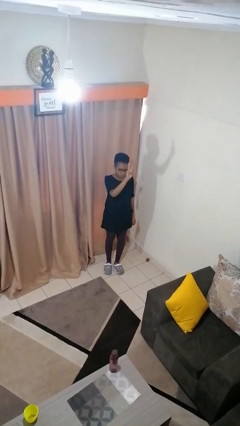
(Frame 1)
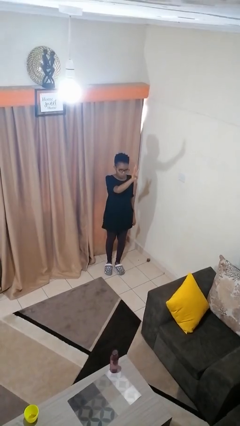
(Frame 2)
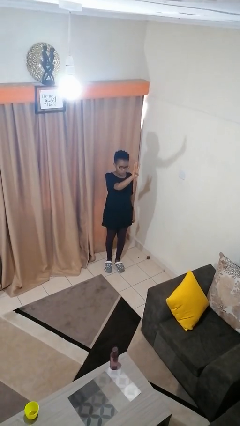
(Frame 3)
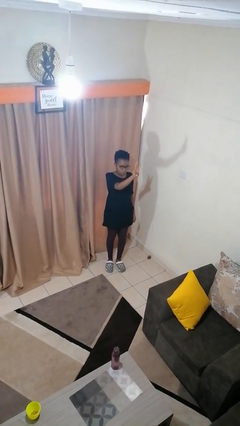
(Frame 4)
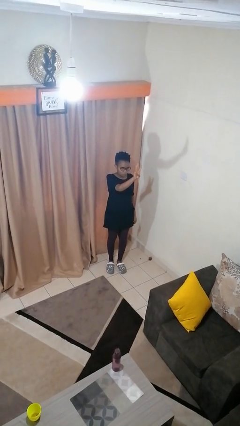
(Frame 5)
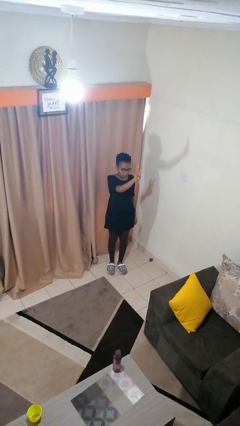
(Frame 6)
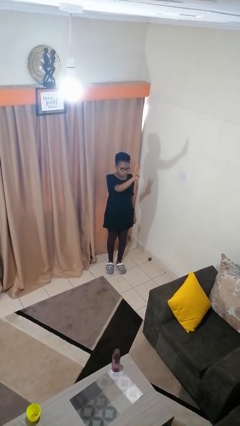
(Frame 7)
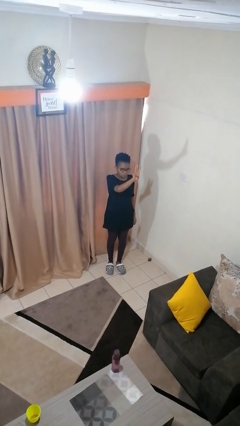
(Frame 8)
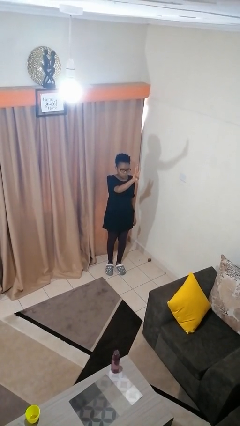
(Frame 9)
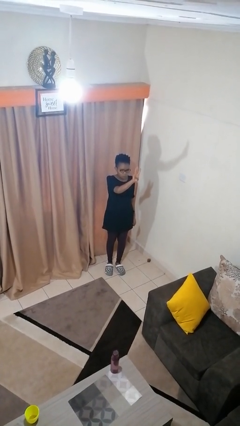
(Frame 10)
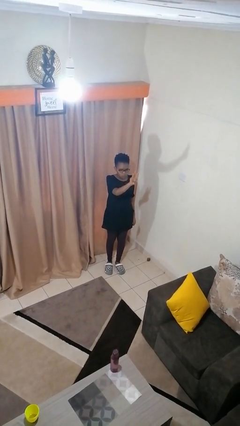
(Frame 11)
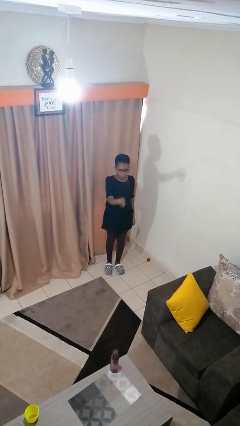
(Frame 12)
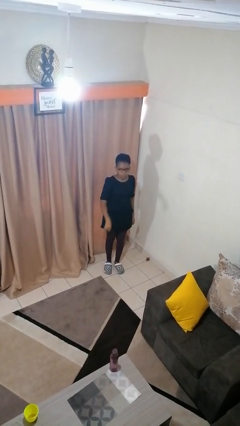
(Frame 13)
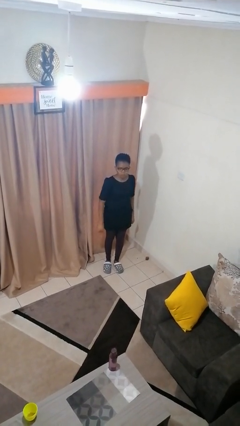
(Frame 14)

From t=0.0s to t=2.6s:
person gestures number three

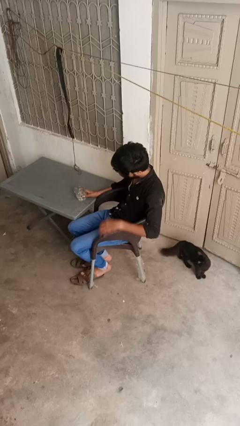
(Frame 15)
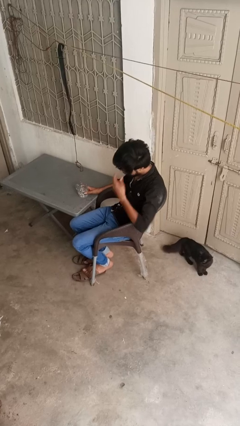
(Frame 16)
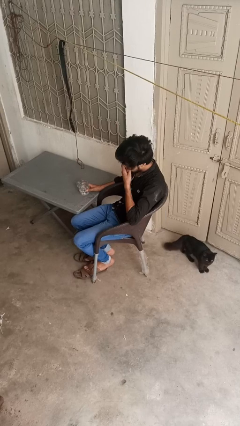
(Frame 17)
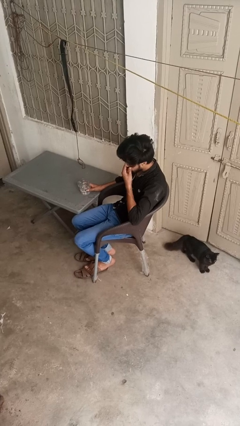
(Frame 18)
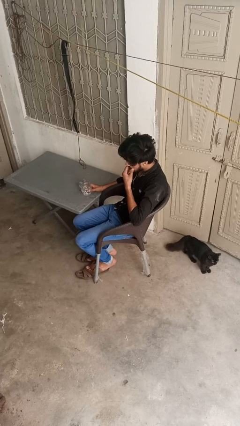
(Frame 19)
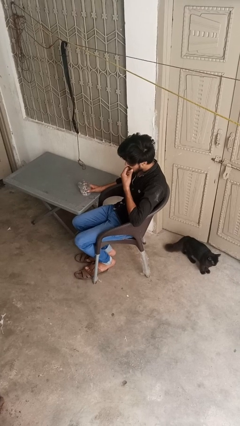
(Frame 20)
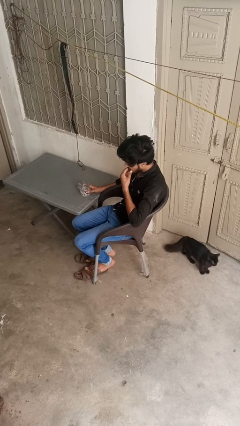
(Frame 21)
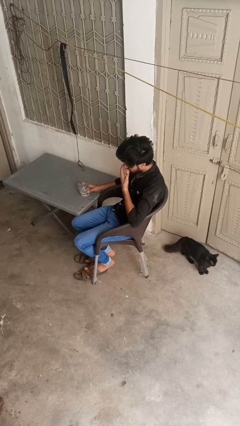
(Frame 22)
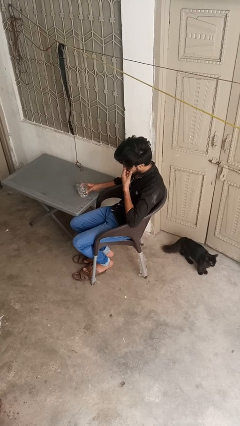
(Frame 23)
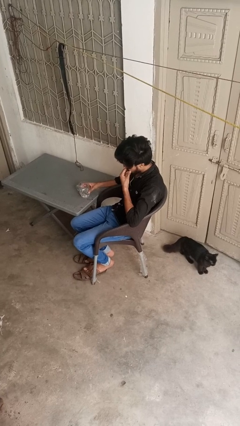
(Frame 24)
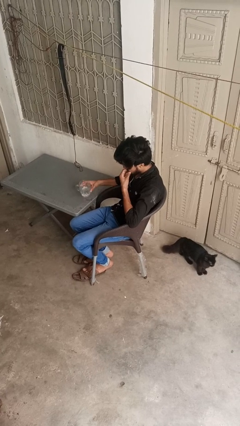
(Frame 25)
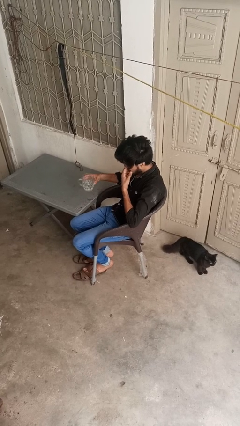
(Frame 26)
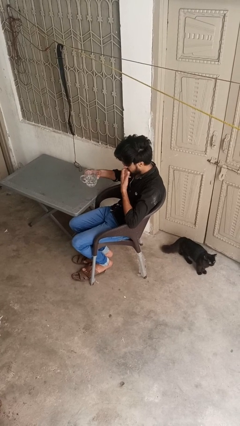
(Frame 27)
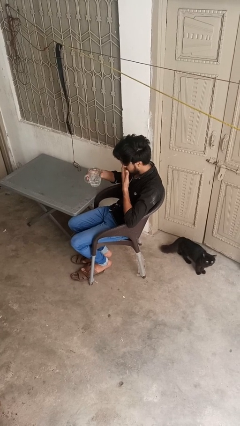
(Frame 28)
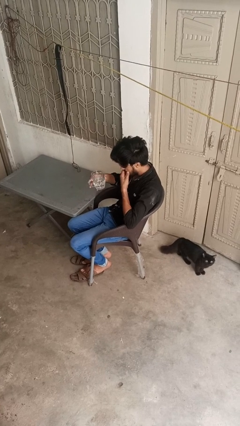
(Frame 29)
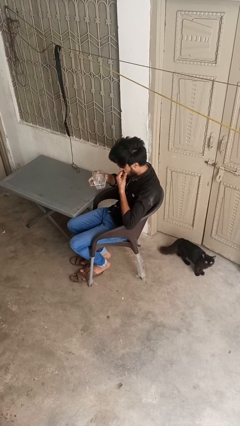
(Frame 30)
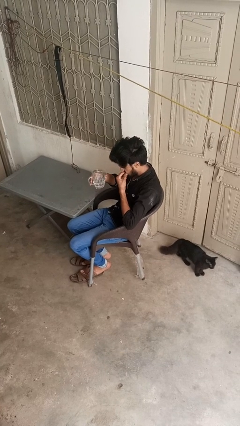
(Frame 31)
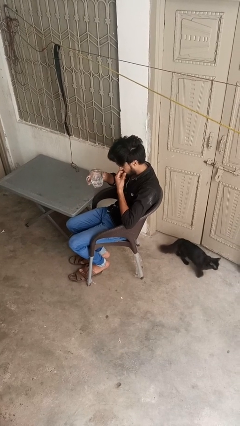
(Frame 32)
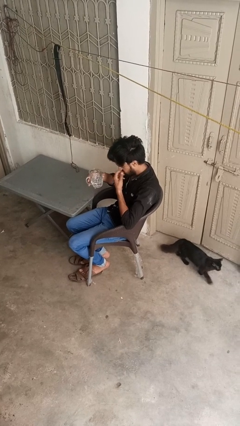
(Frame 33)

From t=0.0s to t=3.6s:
person picks up object from table

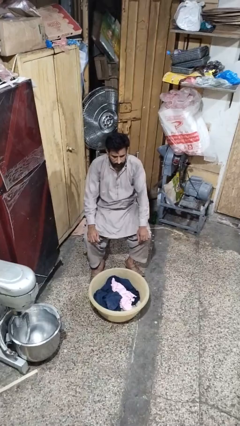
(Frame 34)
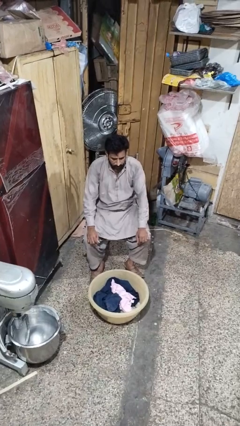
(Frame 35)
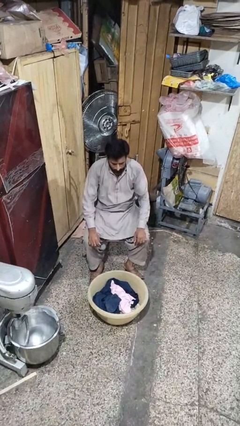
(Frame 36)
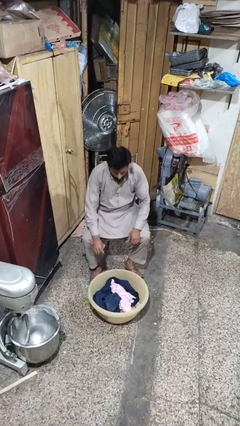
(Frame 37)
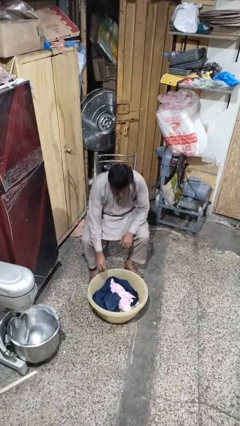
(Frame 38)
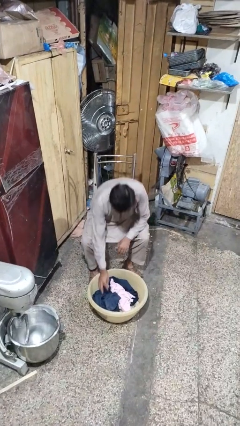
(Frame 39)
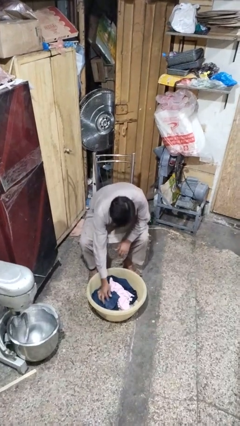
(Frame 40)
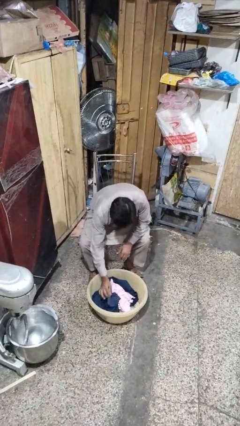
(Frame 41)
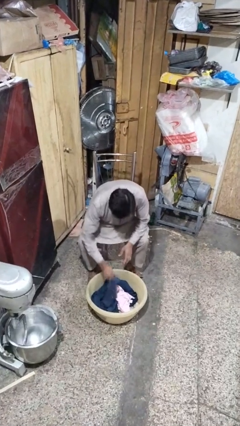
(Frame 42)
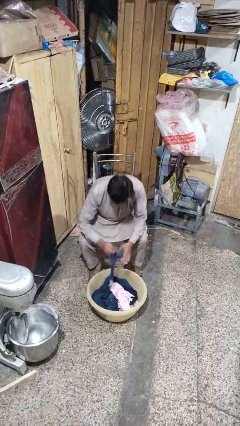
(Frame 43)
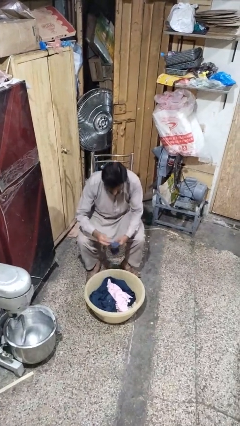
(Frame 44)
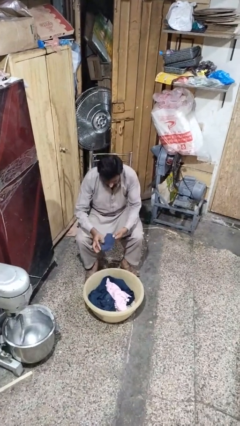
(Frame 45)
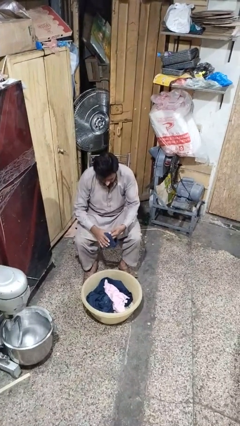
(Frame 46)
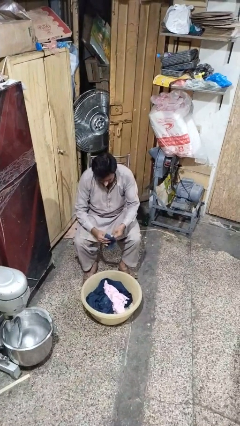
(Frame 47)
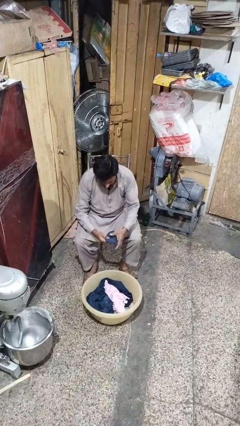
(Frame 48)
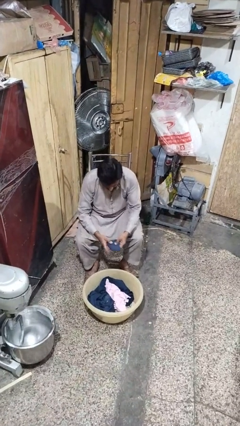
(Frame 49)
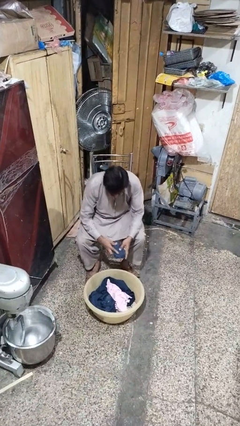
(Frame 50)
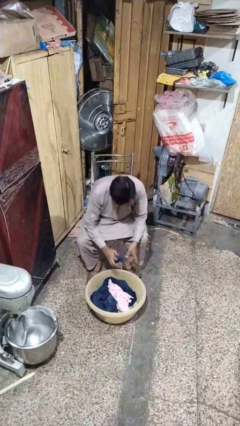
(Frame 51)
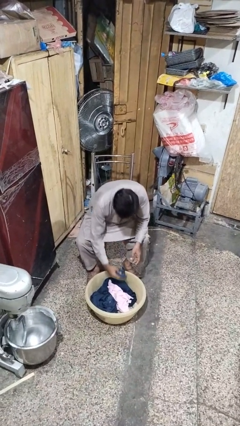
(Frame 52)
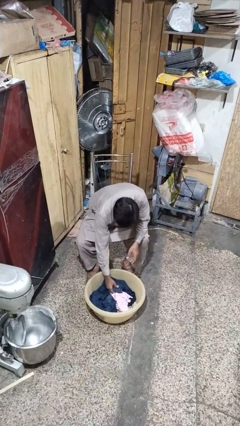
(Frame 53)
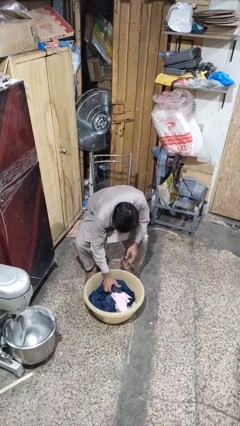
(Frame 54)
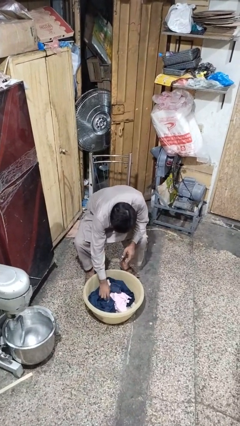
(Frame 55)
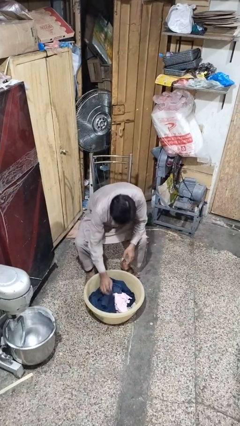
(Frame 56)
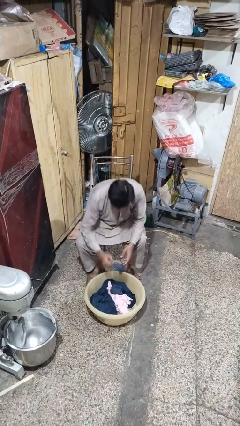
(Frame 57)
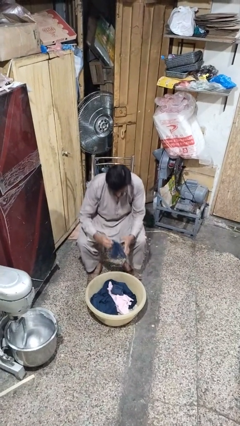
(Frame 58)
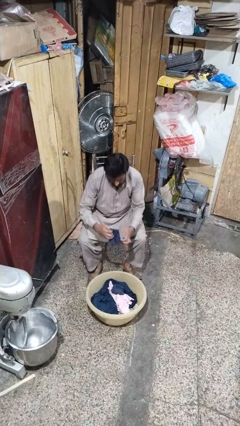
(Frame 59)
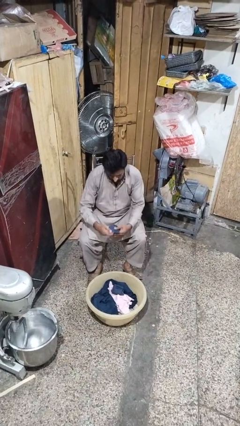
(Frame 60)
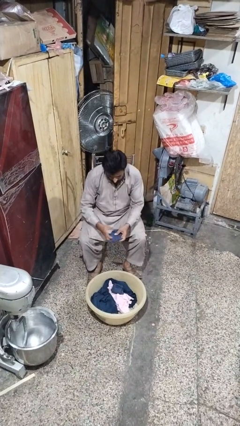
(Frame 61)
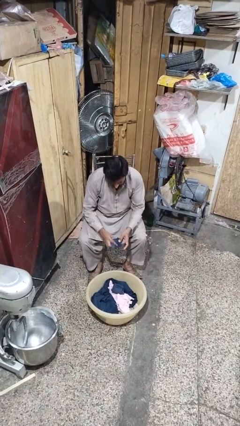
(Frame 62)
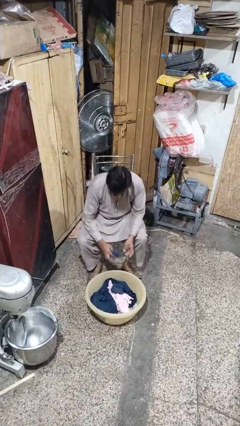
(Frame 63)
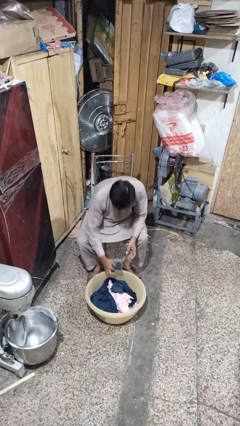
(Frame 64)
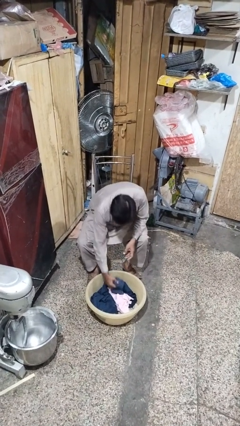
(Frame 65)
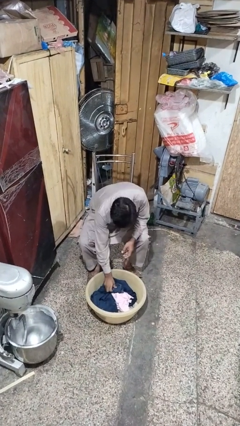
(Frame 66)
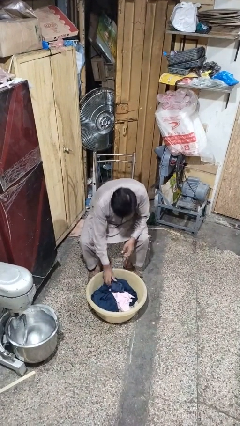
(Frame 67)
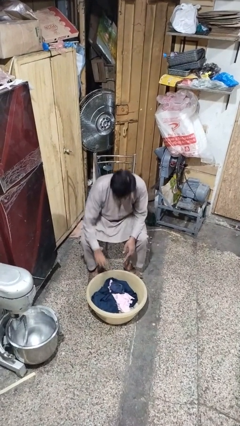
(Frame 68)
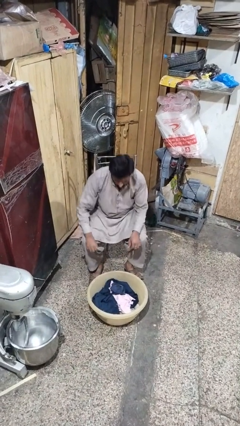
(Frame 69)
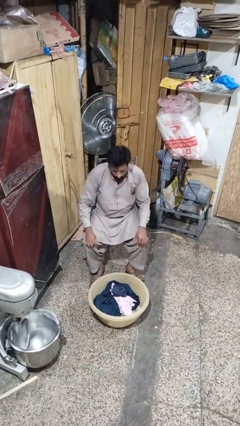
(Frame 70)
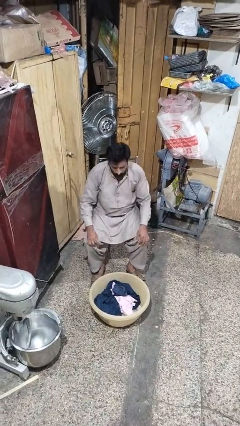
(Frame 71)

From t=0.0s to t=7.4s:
person folds socks

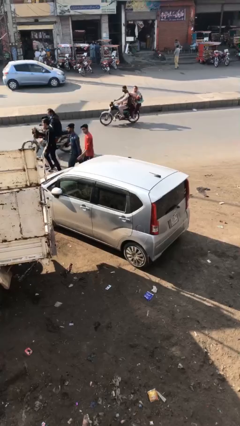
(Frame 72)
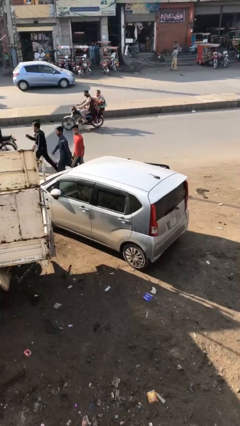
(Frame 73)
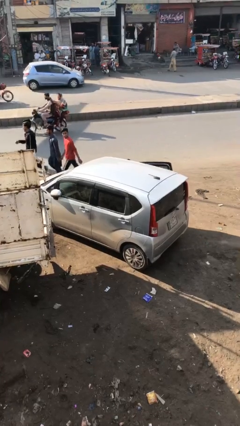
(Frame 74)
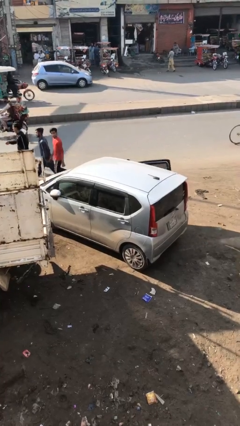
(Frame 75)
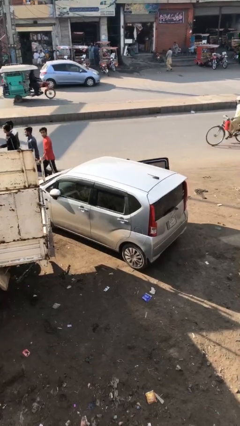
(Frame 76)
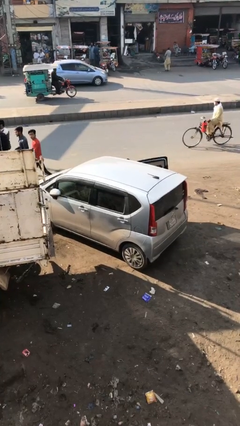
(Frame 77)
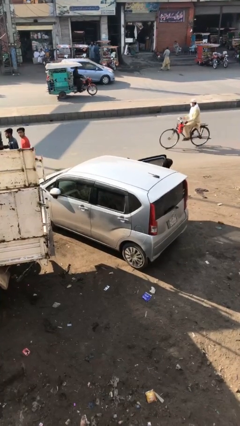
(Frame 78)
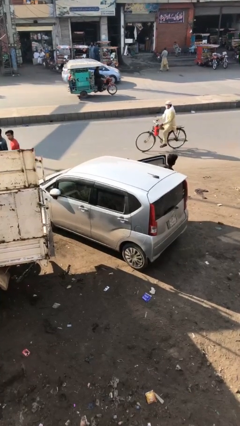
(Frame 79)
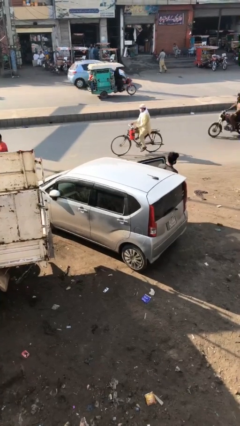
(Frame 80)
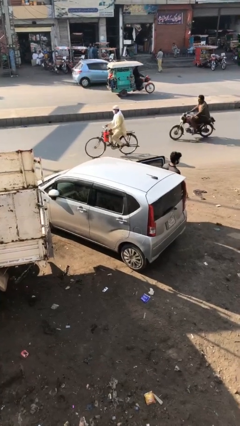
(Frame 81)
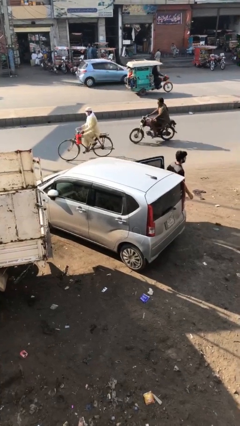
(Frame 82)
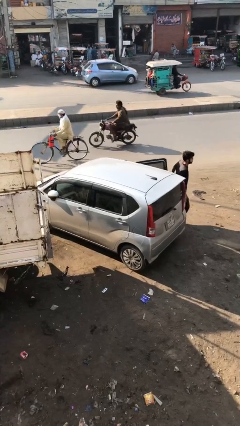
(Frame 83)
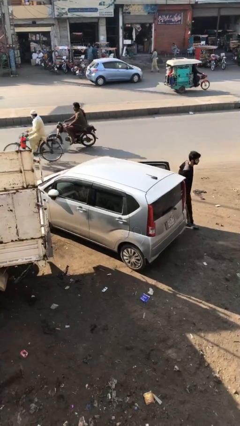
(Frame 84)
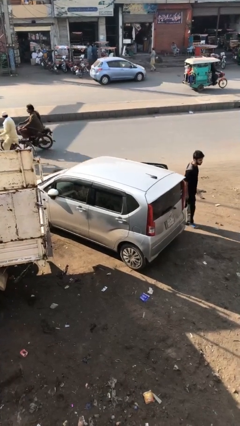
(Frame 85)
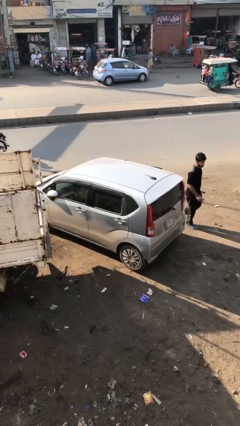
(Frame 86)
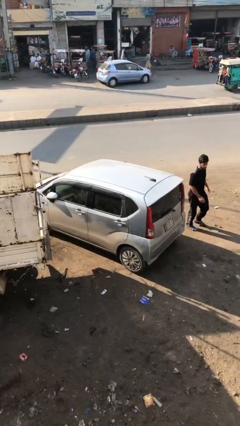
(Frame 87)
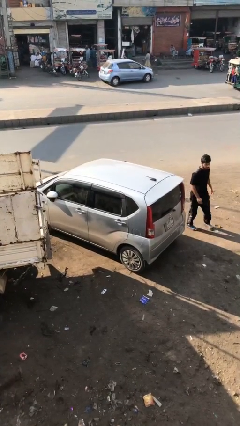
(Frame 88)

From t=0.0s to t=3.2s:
car drops off person

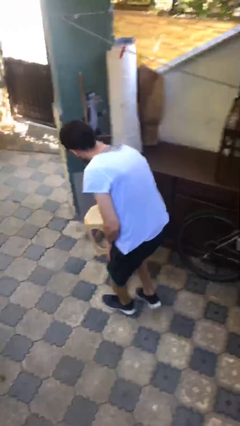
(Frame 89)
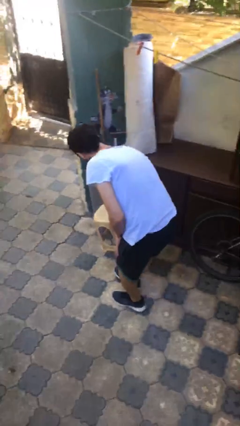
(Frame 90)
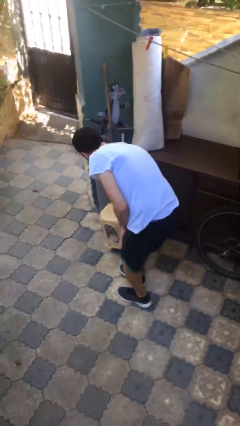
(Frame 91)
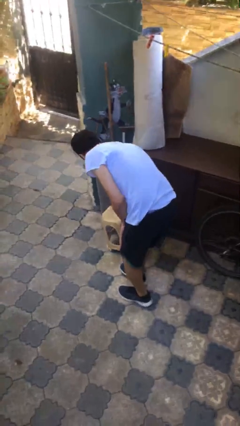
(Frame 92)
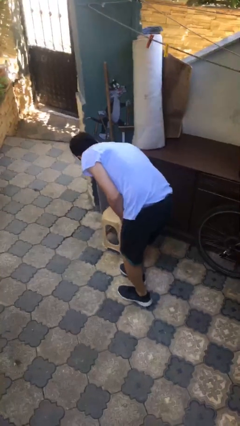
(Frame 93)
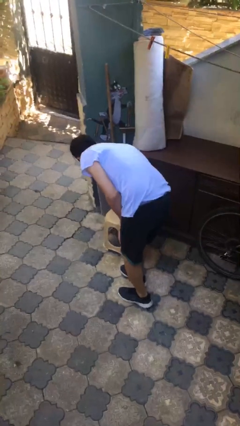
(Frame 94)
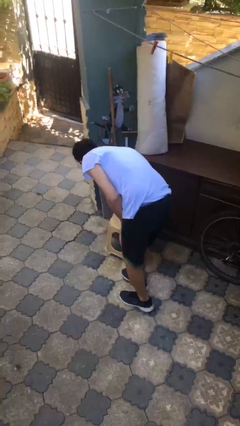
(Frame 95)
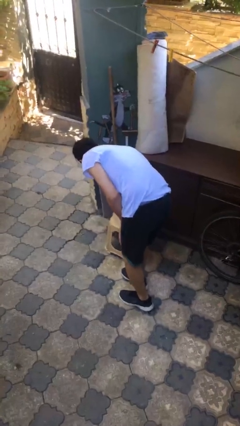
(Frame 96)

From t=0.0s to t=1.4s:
person puts down object on floor
